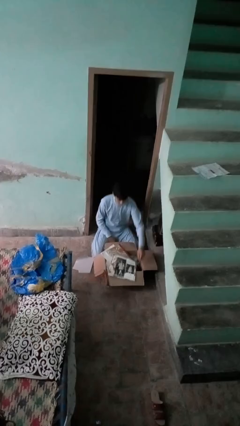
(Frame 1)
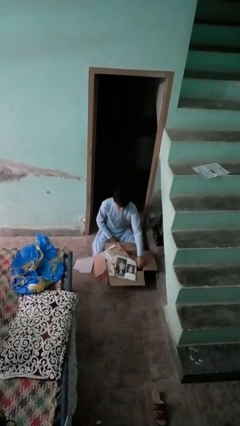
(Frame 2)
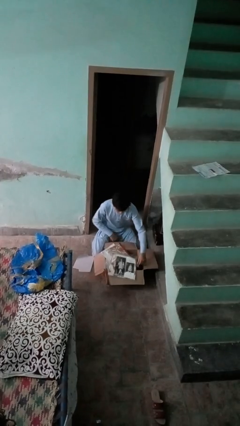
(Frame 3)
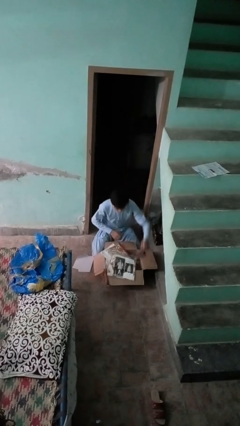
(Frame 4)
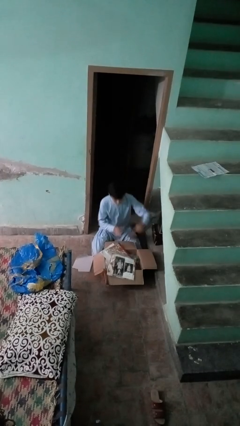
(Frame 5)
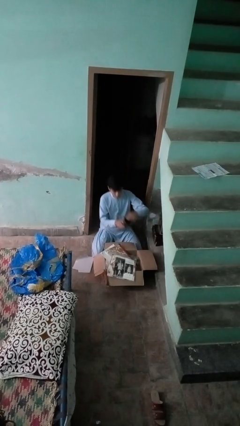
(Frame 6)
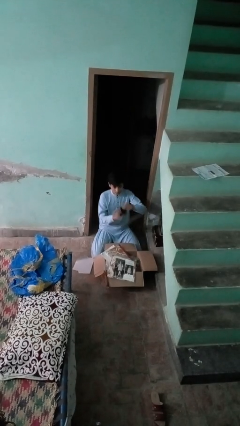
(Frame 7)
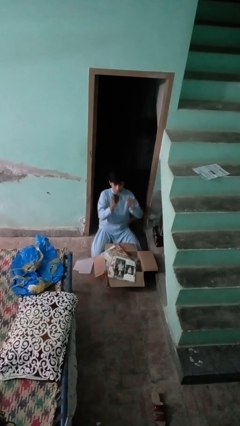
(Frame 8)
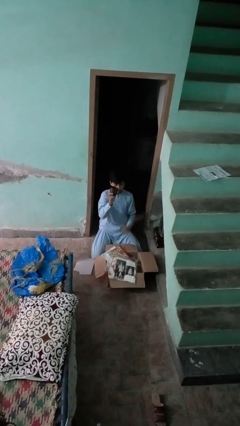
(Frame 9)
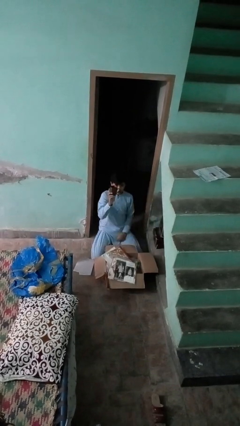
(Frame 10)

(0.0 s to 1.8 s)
person takes object from box

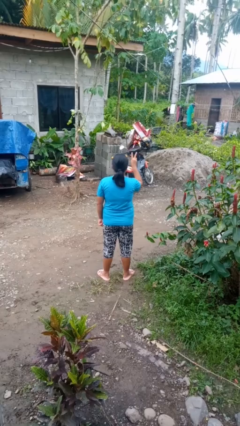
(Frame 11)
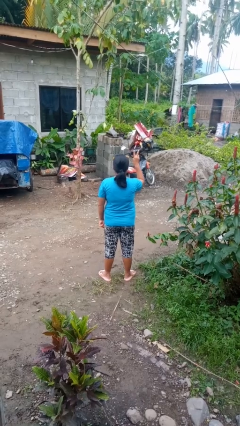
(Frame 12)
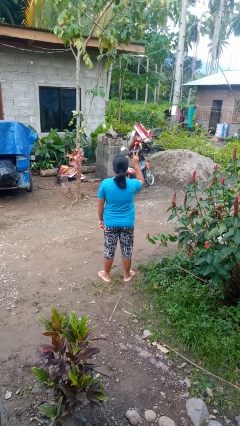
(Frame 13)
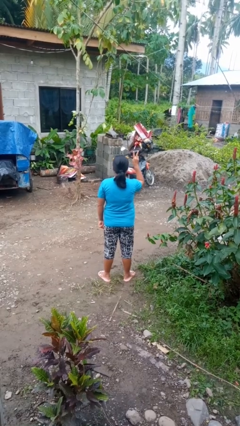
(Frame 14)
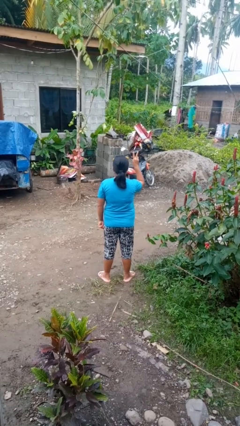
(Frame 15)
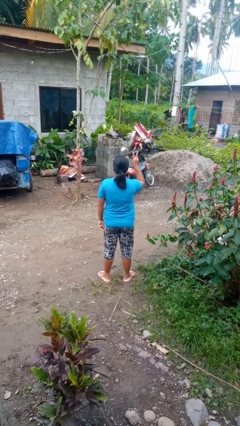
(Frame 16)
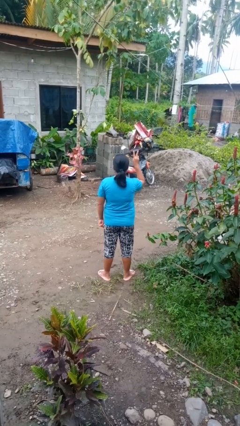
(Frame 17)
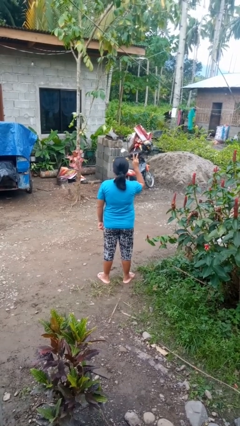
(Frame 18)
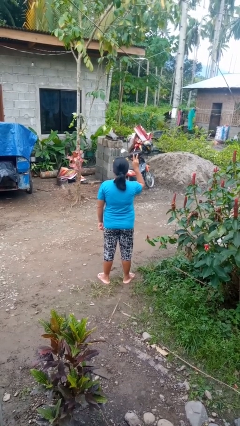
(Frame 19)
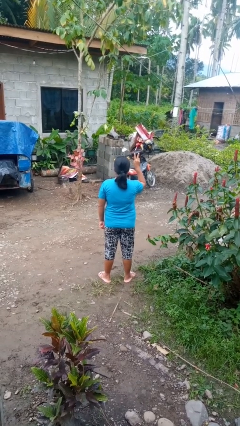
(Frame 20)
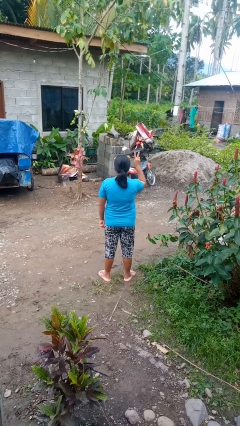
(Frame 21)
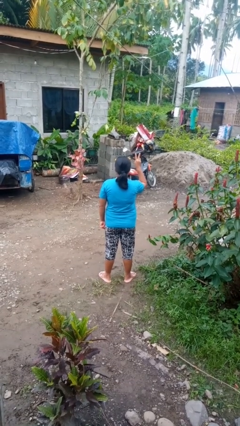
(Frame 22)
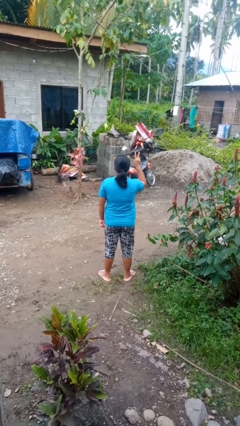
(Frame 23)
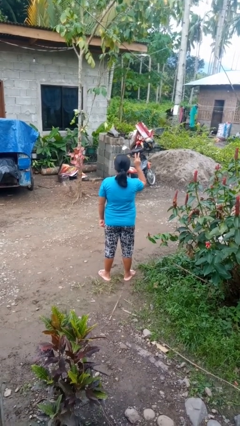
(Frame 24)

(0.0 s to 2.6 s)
person gestures peace

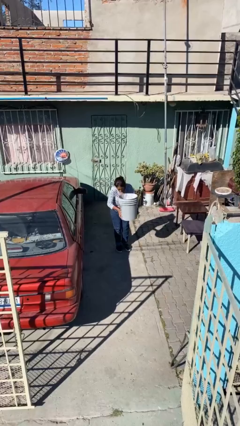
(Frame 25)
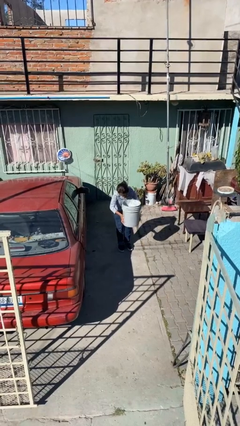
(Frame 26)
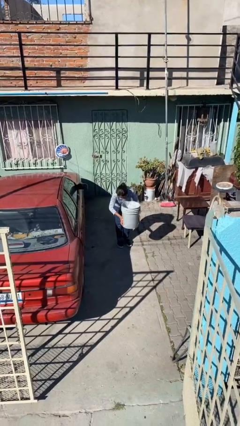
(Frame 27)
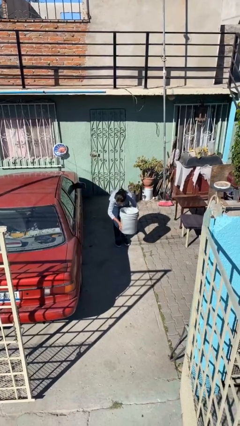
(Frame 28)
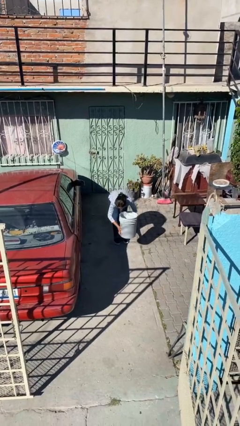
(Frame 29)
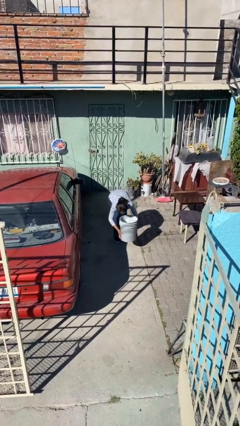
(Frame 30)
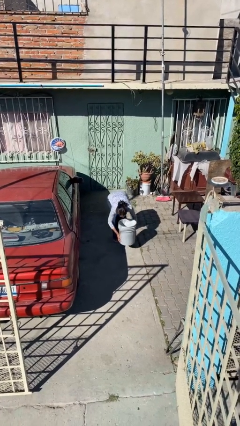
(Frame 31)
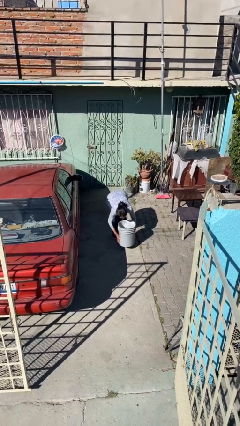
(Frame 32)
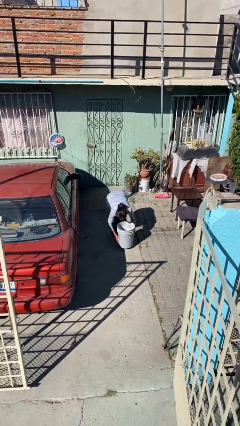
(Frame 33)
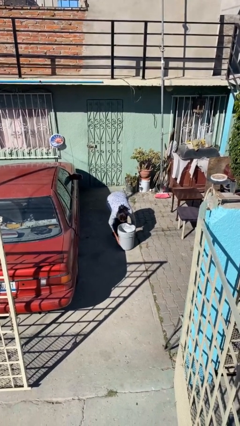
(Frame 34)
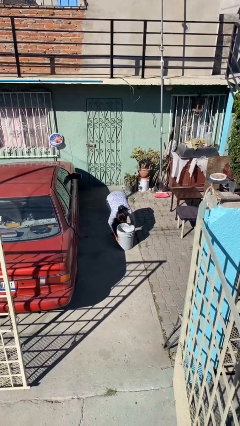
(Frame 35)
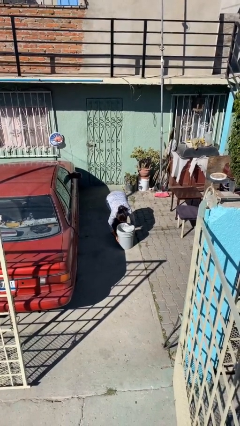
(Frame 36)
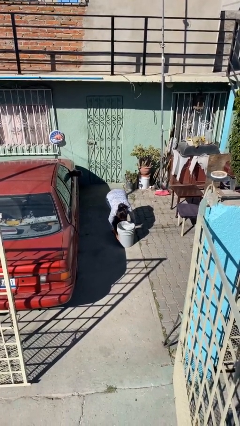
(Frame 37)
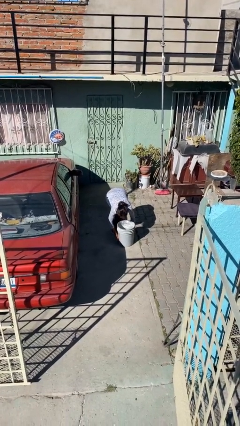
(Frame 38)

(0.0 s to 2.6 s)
person puts down object on floor

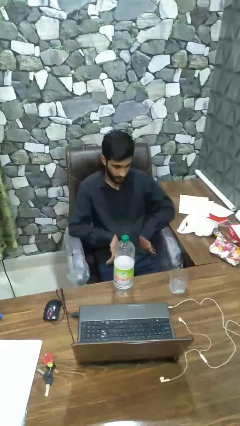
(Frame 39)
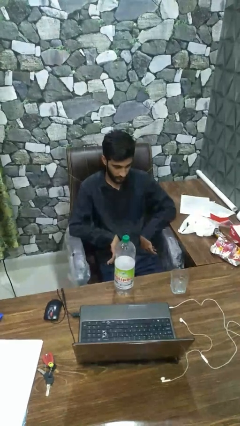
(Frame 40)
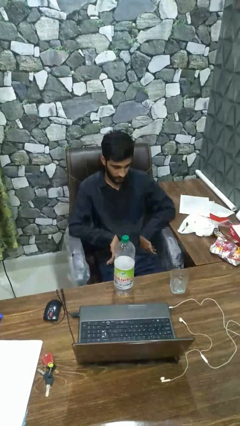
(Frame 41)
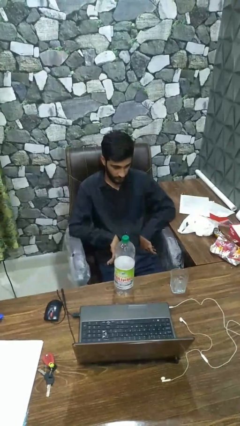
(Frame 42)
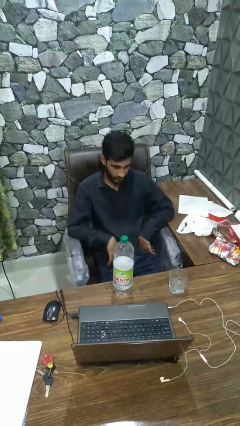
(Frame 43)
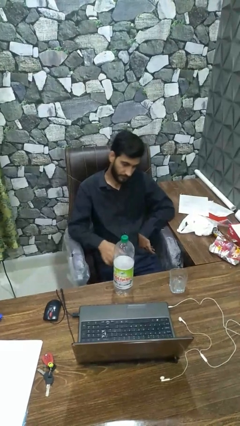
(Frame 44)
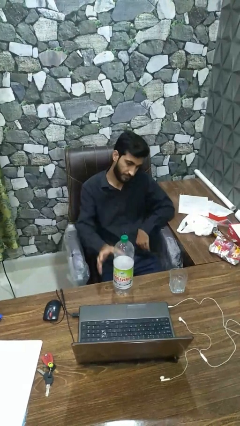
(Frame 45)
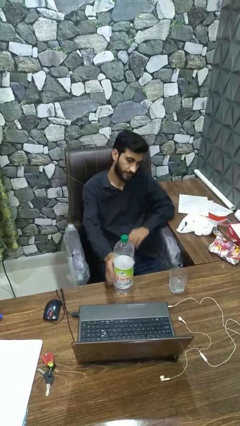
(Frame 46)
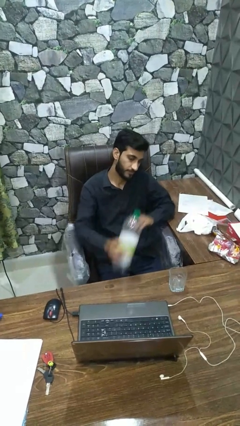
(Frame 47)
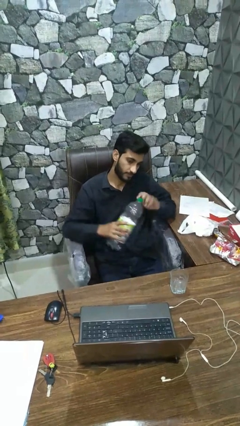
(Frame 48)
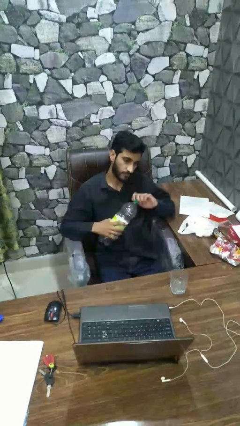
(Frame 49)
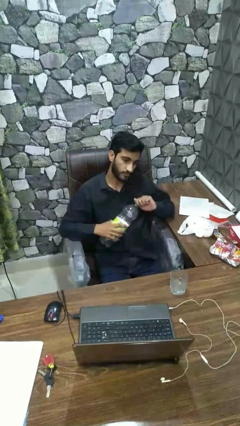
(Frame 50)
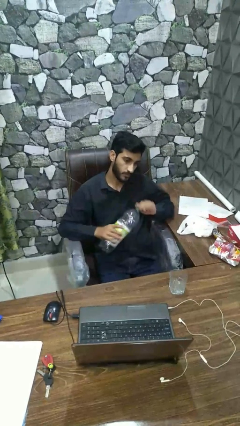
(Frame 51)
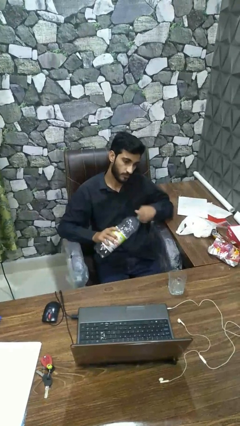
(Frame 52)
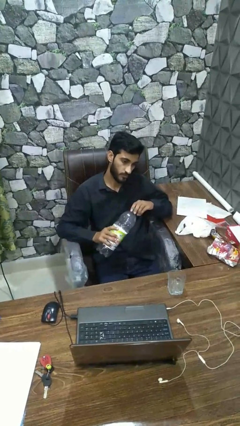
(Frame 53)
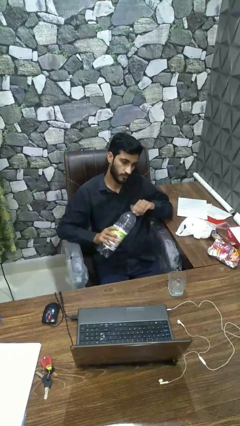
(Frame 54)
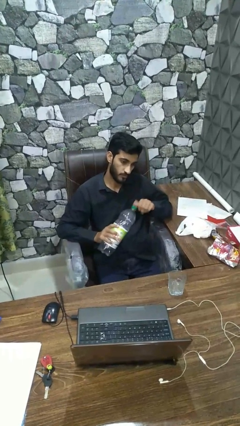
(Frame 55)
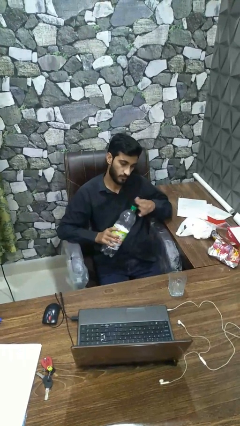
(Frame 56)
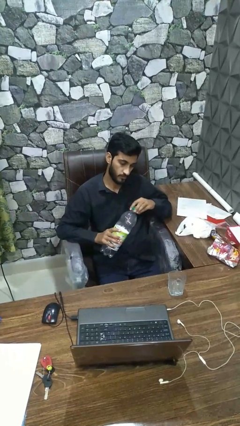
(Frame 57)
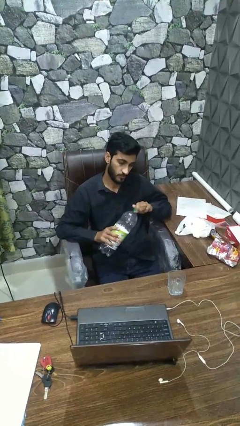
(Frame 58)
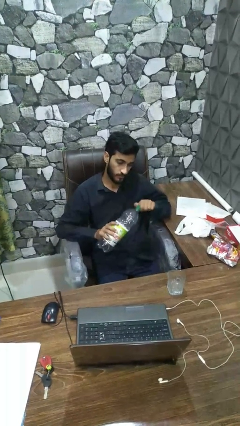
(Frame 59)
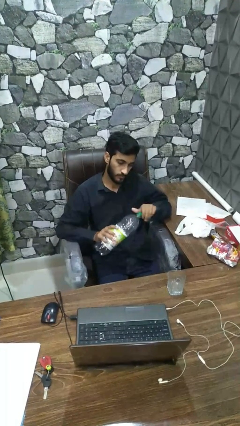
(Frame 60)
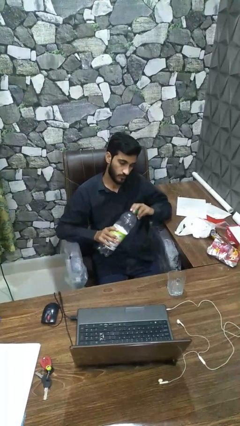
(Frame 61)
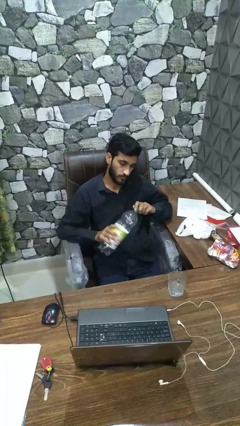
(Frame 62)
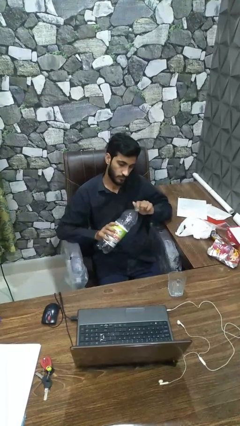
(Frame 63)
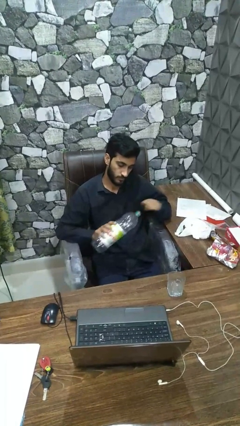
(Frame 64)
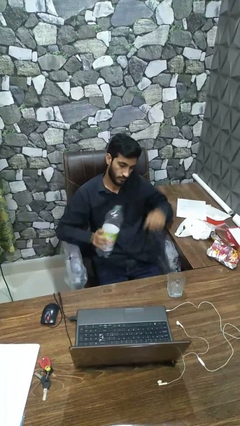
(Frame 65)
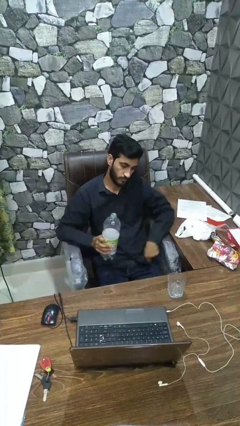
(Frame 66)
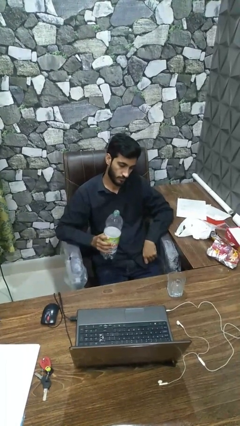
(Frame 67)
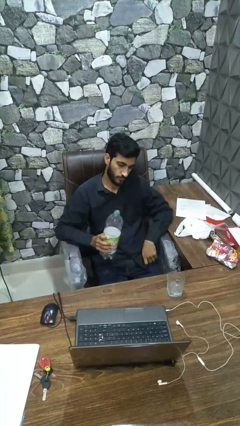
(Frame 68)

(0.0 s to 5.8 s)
person unscrews lid from bottle

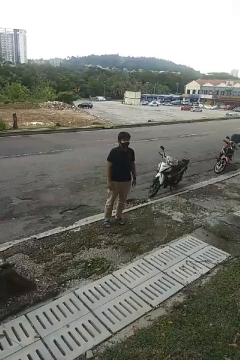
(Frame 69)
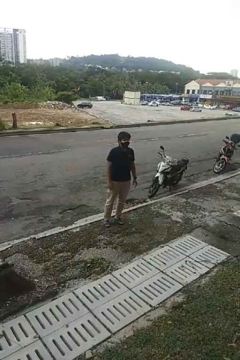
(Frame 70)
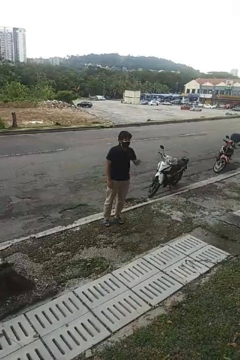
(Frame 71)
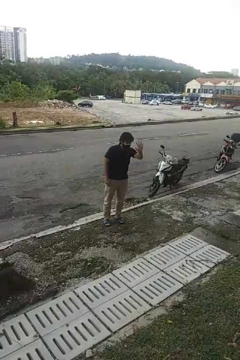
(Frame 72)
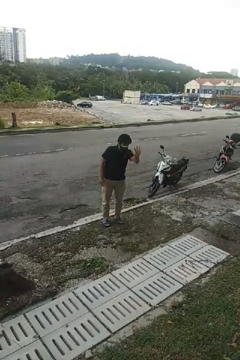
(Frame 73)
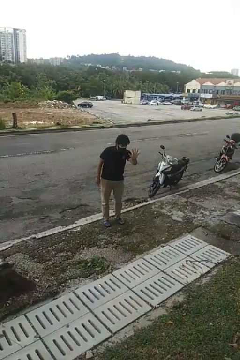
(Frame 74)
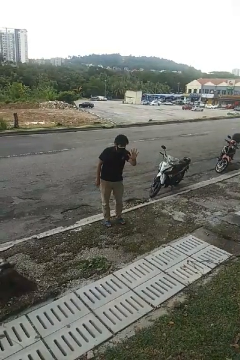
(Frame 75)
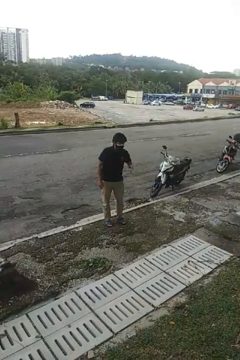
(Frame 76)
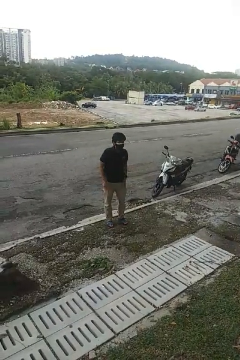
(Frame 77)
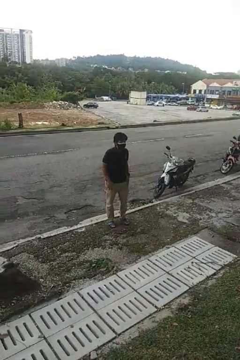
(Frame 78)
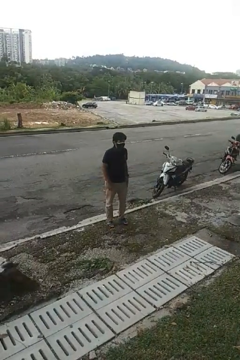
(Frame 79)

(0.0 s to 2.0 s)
person gestures stop

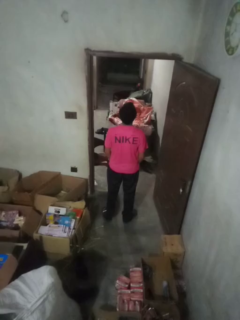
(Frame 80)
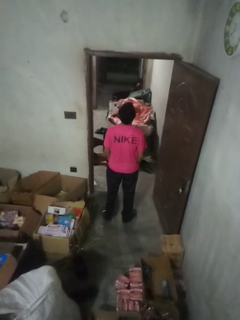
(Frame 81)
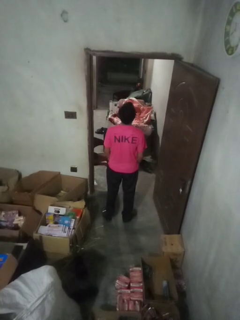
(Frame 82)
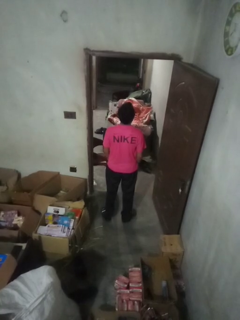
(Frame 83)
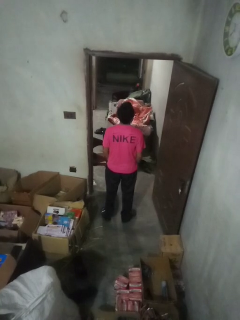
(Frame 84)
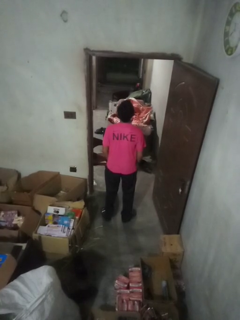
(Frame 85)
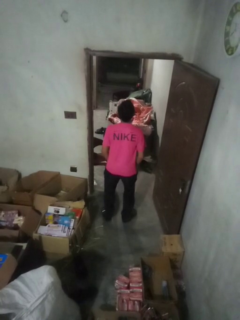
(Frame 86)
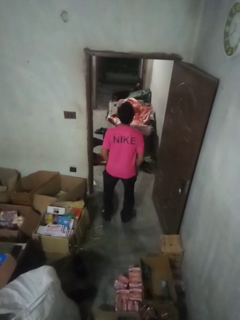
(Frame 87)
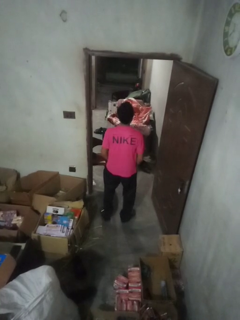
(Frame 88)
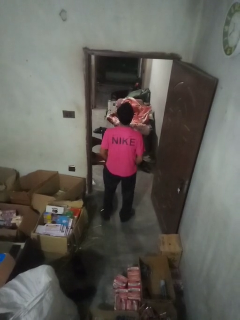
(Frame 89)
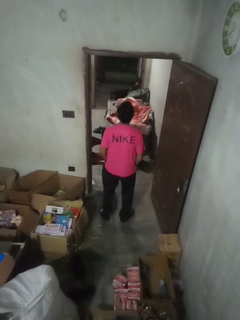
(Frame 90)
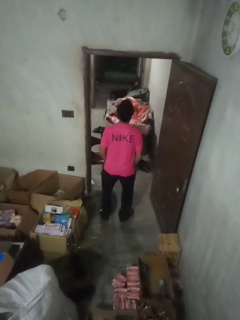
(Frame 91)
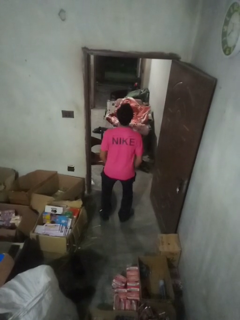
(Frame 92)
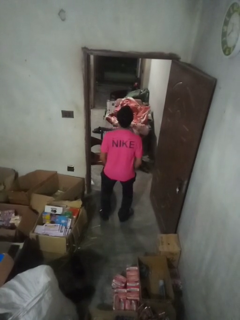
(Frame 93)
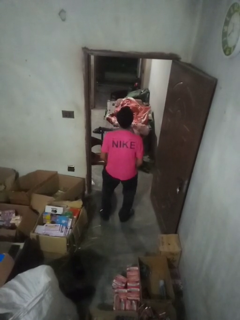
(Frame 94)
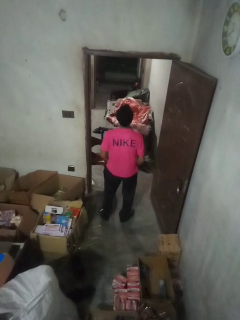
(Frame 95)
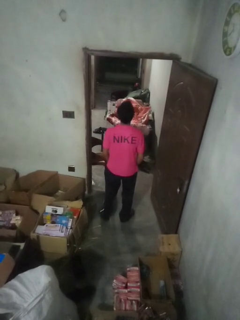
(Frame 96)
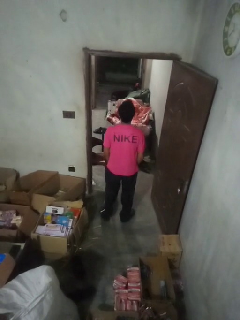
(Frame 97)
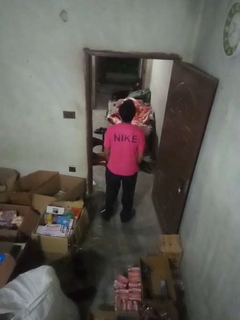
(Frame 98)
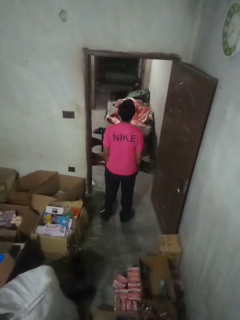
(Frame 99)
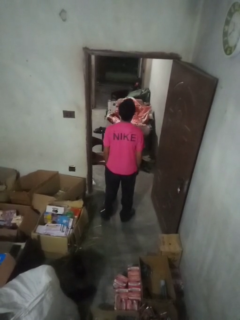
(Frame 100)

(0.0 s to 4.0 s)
person wiggles hips
